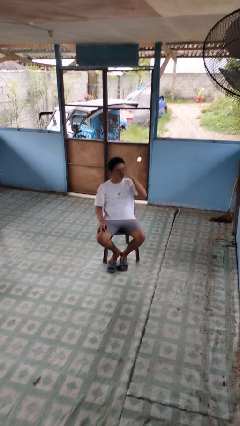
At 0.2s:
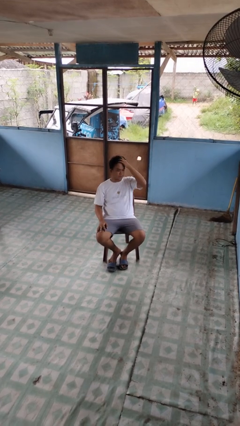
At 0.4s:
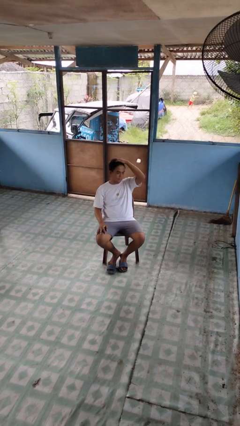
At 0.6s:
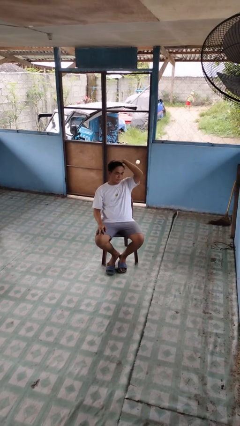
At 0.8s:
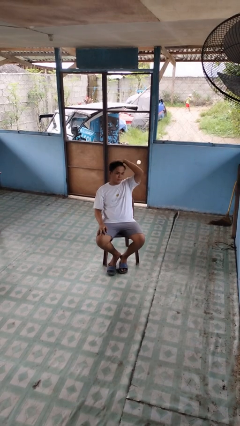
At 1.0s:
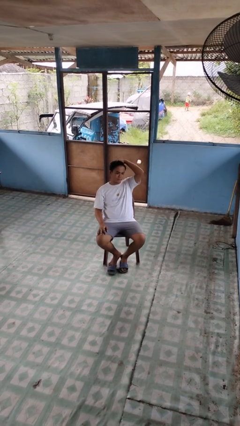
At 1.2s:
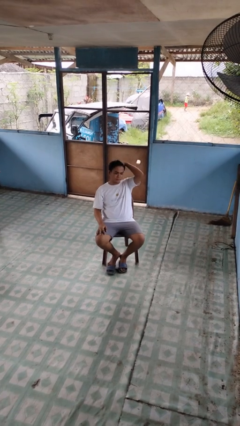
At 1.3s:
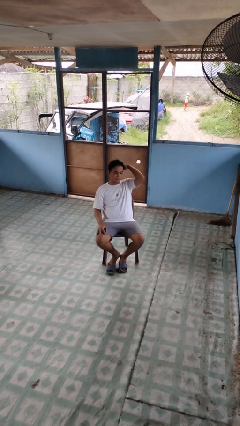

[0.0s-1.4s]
person strokes hair

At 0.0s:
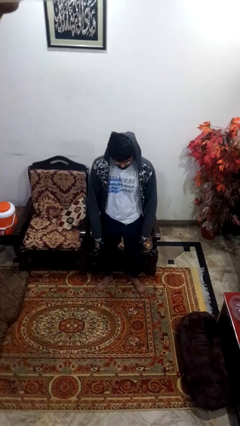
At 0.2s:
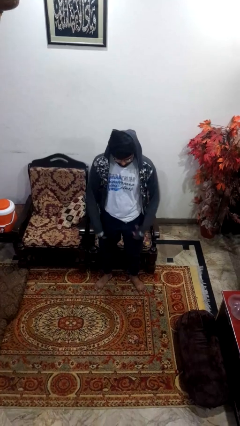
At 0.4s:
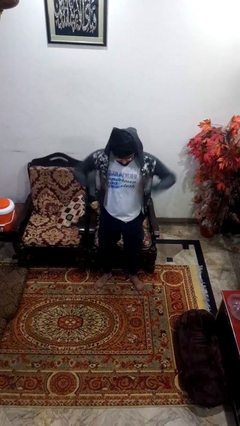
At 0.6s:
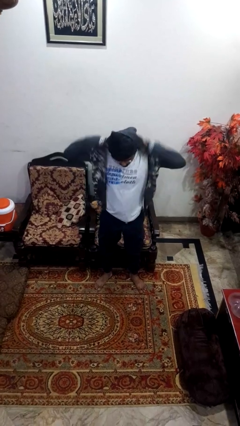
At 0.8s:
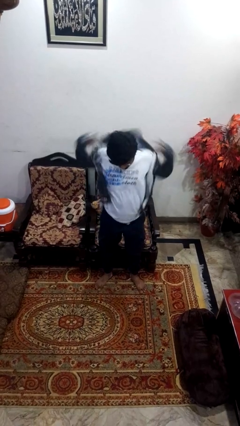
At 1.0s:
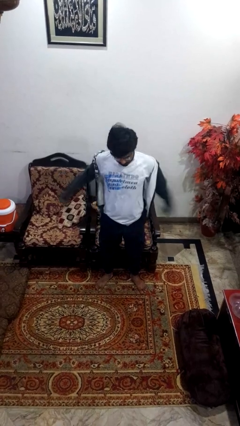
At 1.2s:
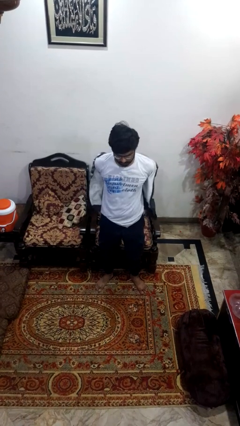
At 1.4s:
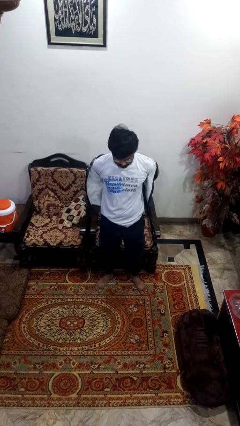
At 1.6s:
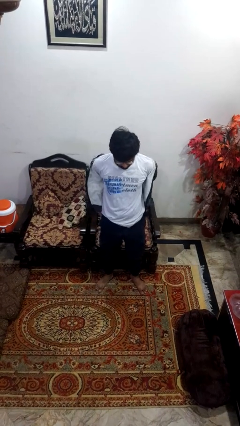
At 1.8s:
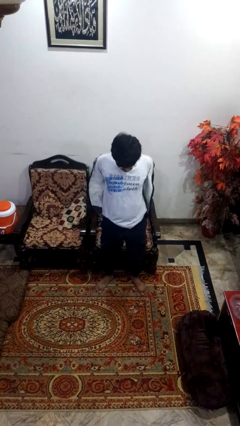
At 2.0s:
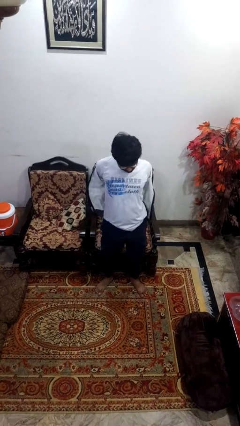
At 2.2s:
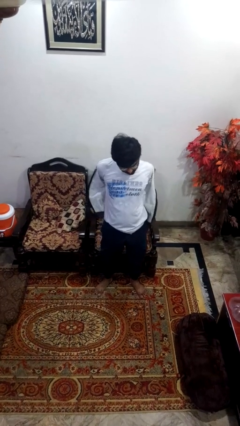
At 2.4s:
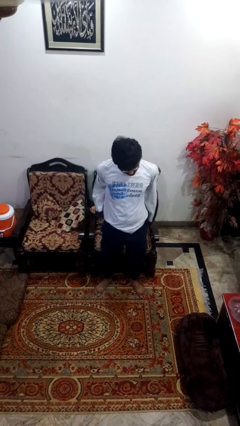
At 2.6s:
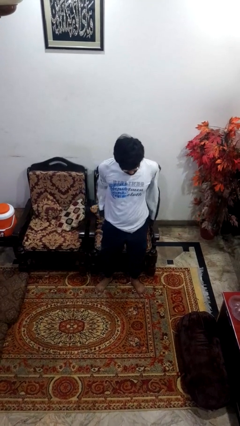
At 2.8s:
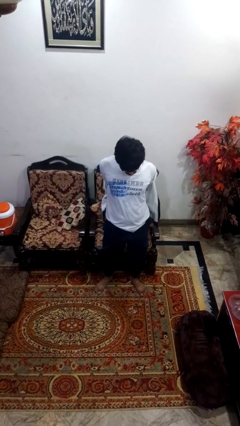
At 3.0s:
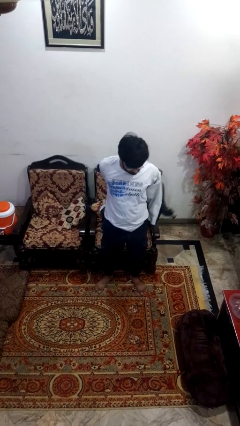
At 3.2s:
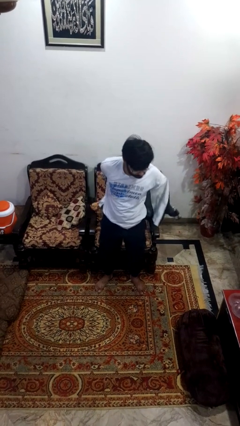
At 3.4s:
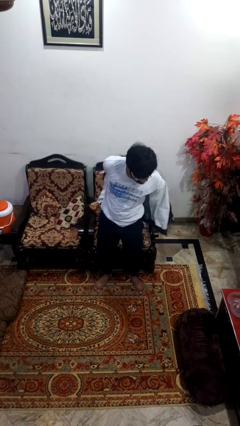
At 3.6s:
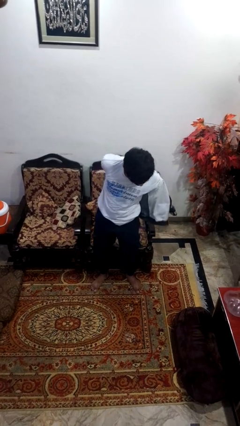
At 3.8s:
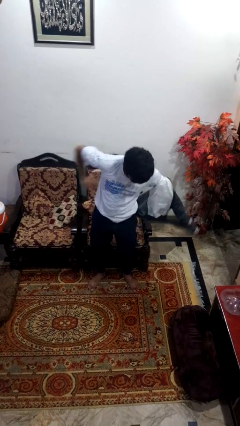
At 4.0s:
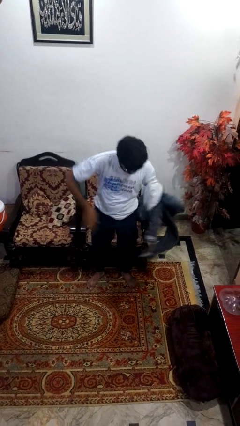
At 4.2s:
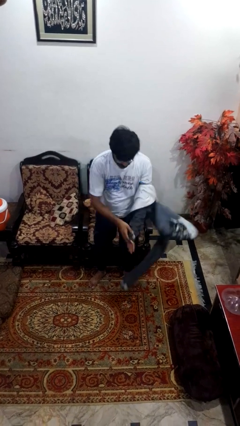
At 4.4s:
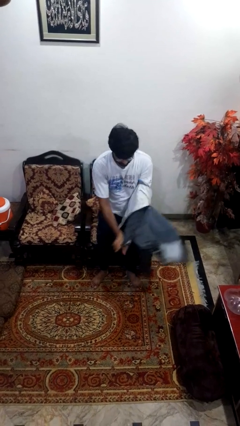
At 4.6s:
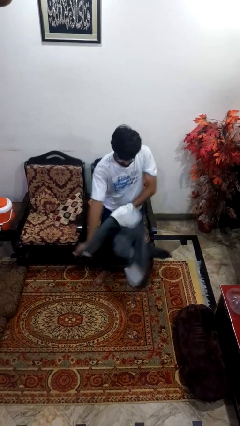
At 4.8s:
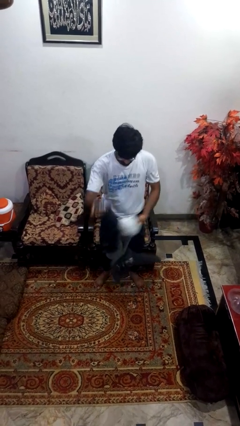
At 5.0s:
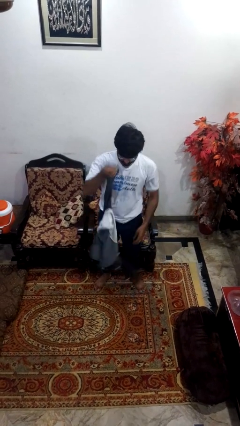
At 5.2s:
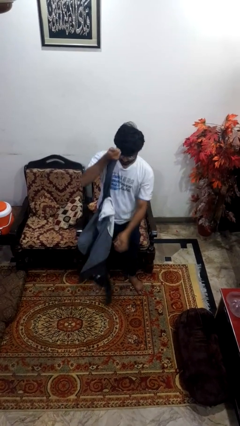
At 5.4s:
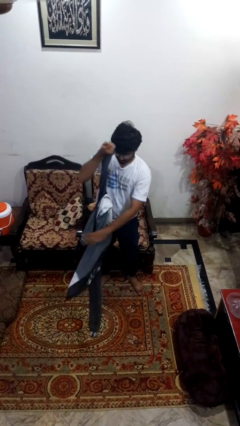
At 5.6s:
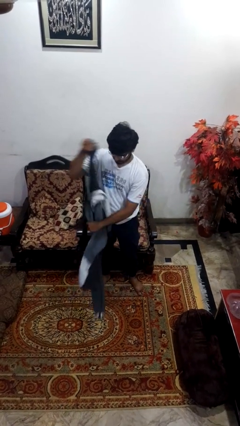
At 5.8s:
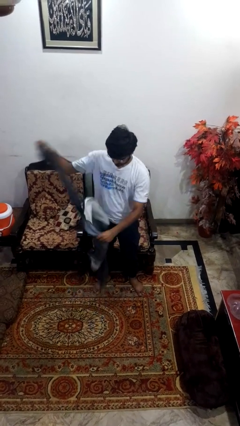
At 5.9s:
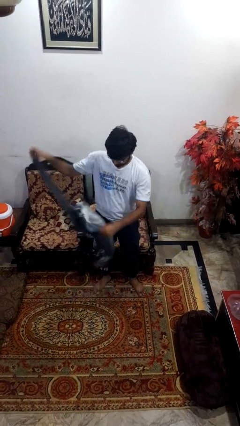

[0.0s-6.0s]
person takes off hoodie

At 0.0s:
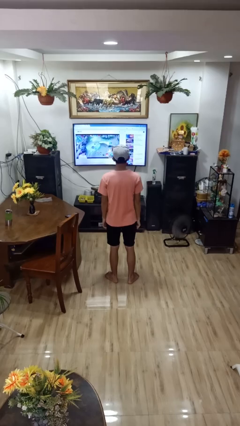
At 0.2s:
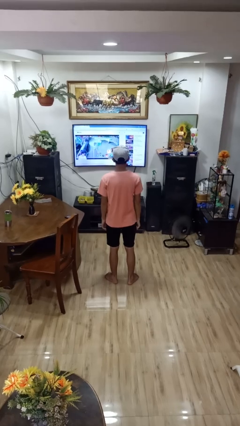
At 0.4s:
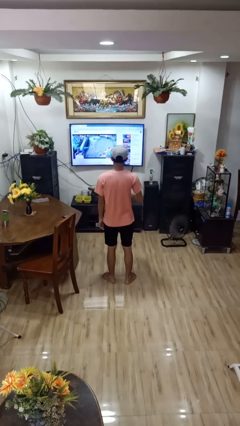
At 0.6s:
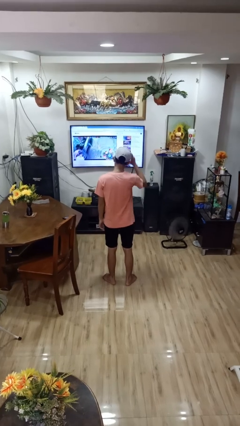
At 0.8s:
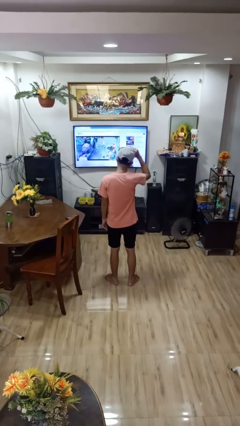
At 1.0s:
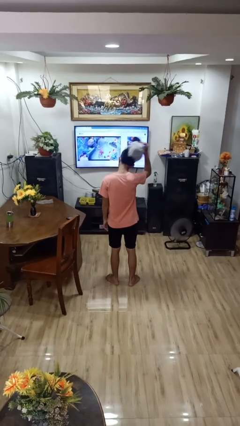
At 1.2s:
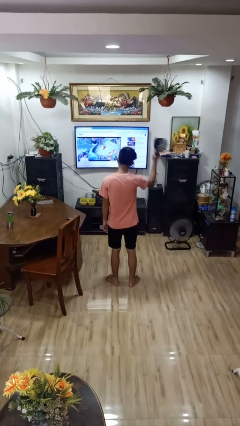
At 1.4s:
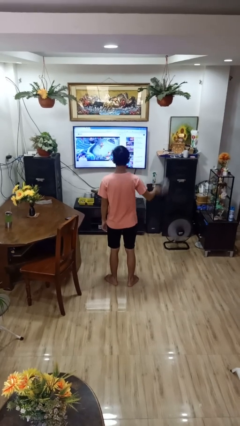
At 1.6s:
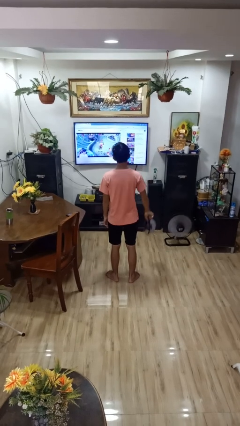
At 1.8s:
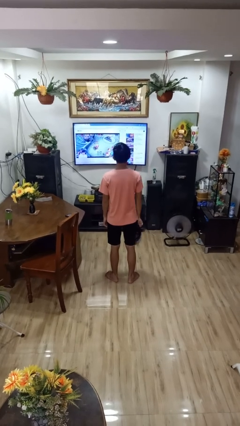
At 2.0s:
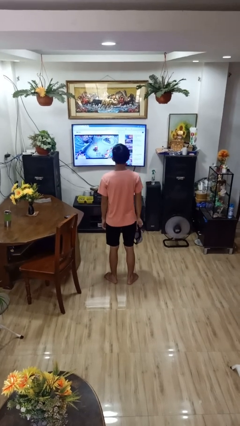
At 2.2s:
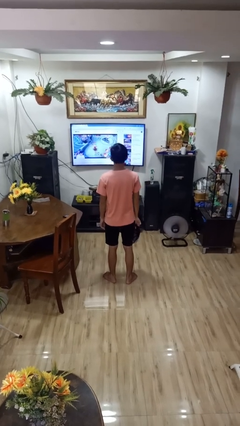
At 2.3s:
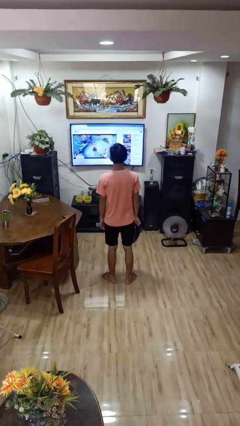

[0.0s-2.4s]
person takes off hat

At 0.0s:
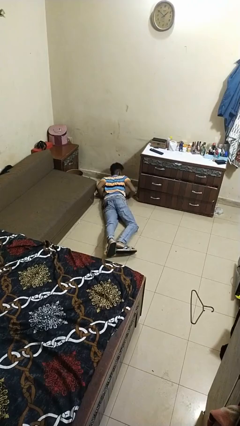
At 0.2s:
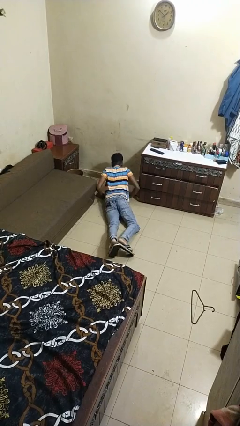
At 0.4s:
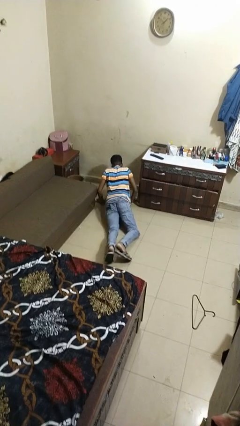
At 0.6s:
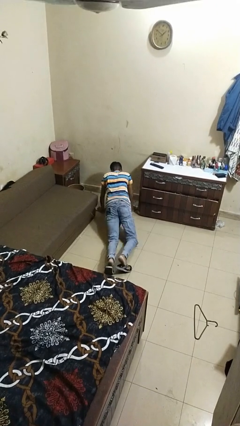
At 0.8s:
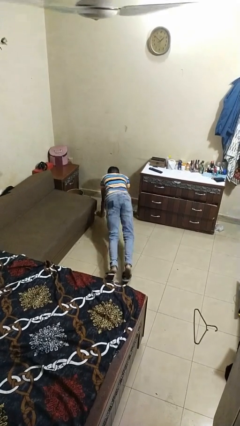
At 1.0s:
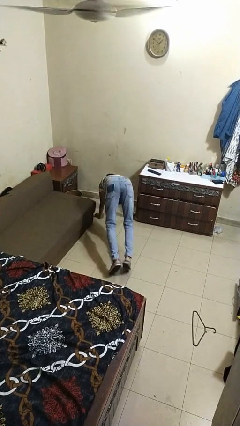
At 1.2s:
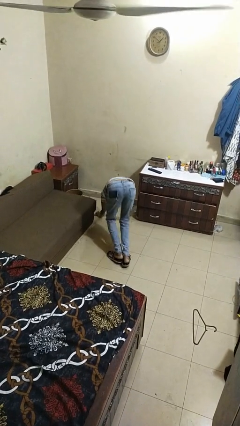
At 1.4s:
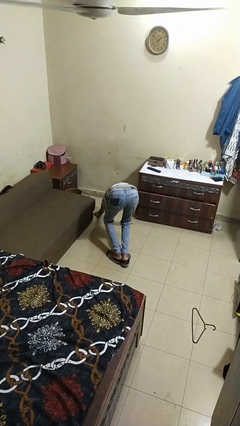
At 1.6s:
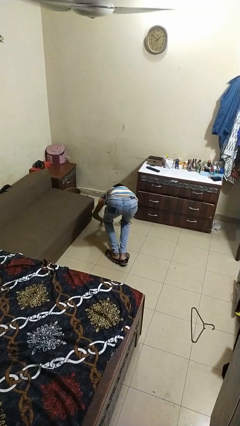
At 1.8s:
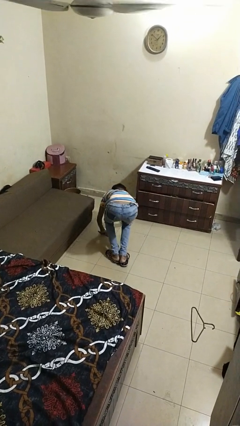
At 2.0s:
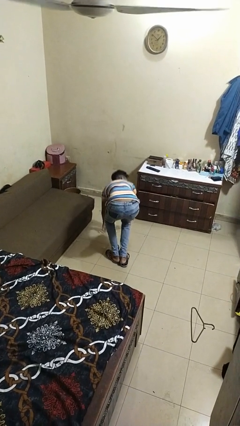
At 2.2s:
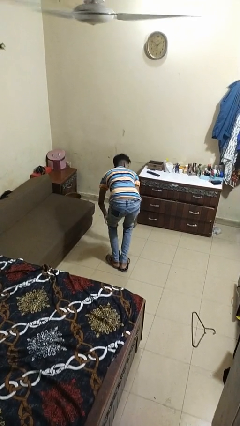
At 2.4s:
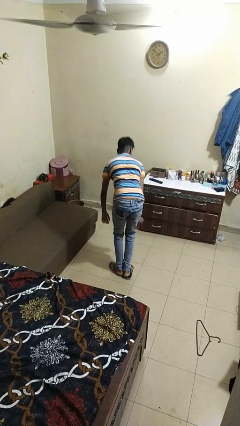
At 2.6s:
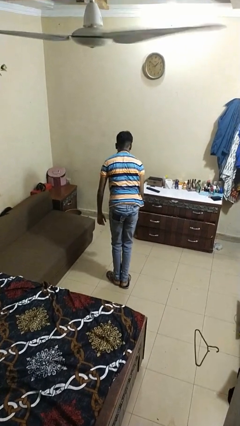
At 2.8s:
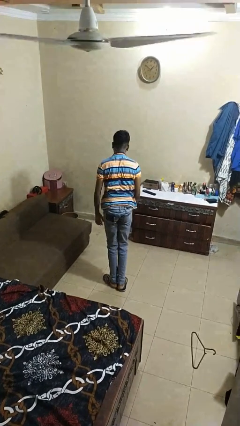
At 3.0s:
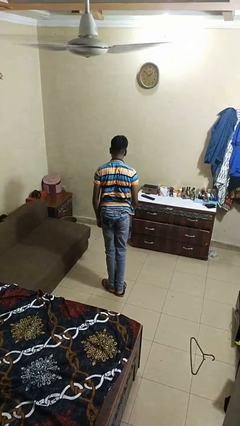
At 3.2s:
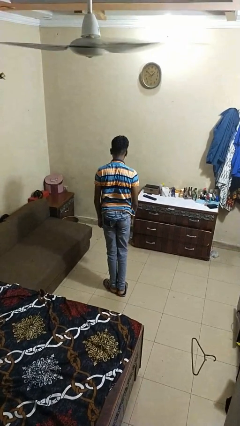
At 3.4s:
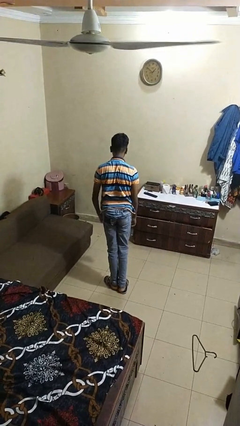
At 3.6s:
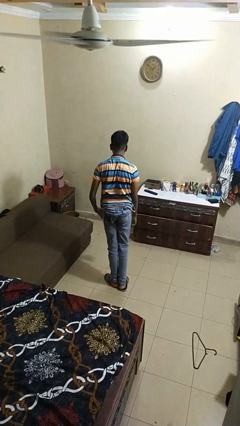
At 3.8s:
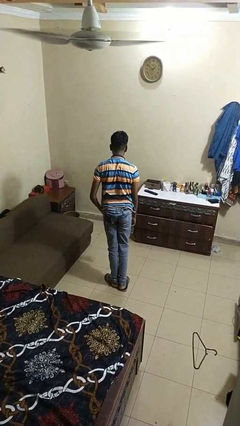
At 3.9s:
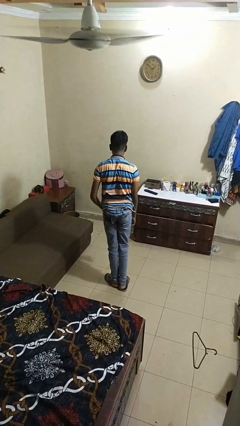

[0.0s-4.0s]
person stands up from floor

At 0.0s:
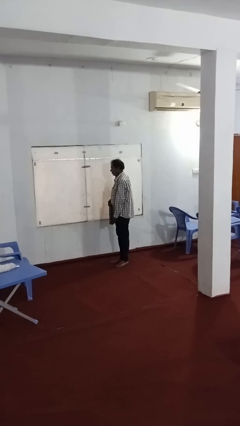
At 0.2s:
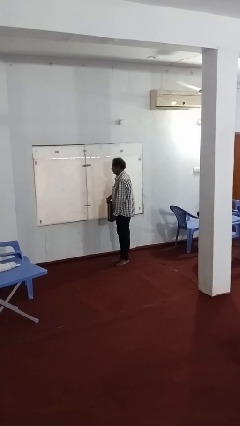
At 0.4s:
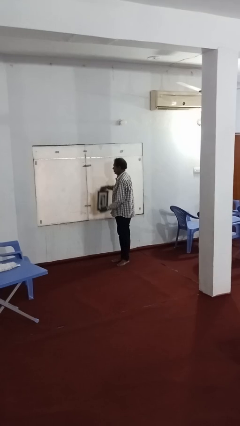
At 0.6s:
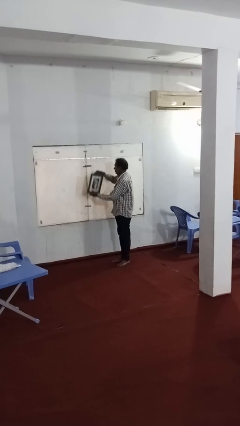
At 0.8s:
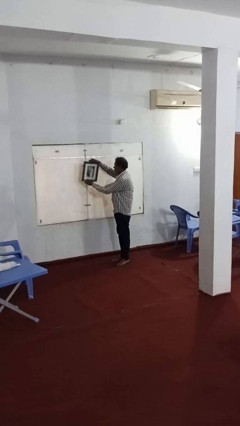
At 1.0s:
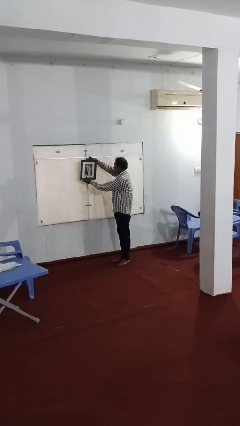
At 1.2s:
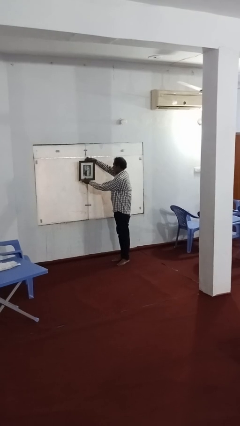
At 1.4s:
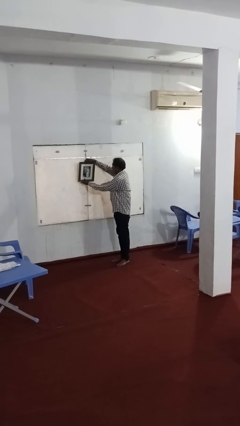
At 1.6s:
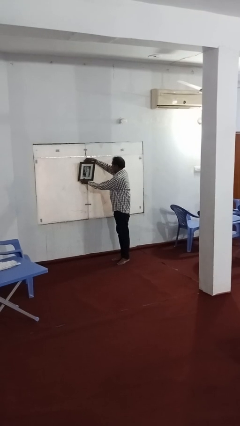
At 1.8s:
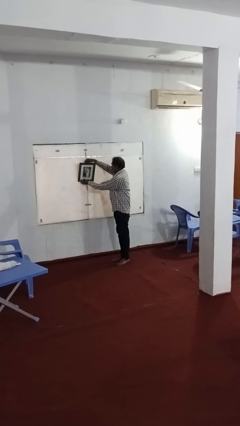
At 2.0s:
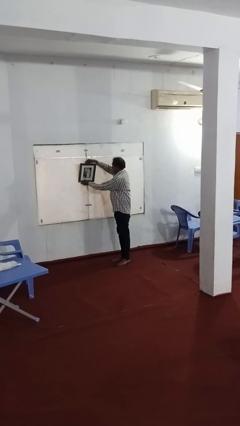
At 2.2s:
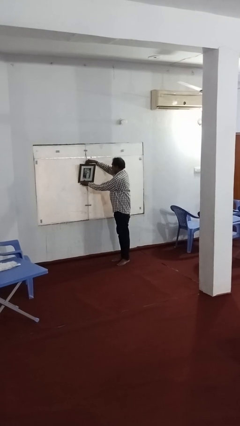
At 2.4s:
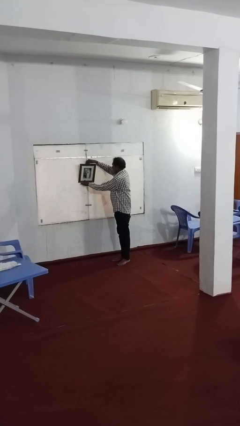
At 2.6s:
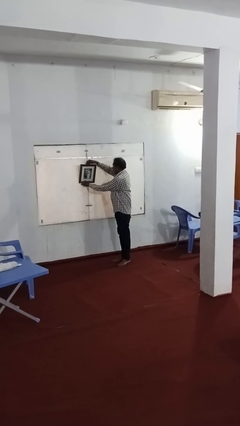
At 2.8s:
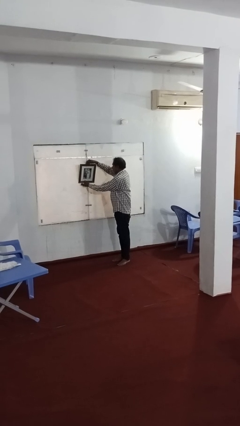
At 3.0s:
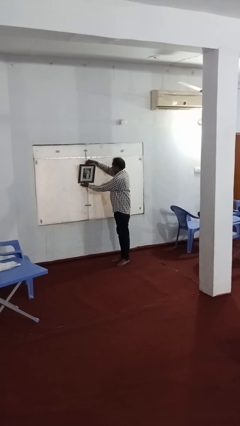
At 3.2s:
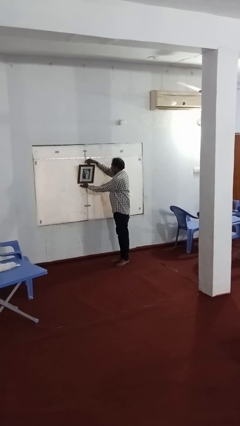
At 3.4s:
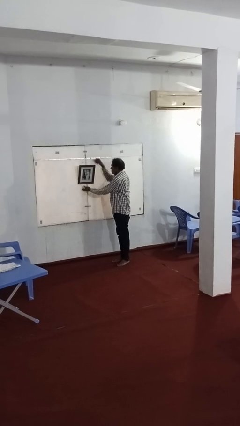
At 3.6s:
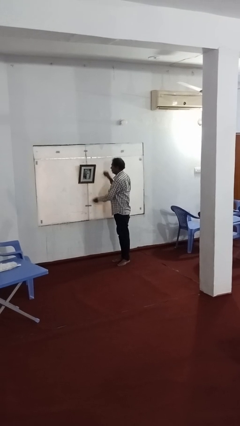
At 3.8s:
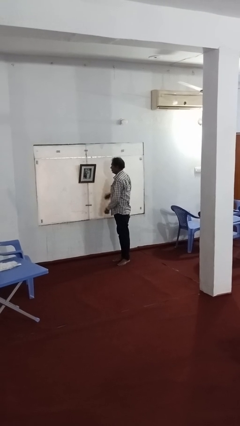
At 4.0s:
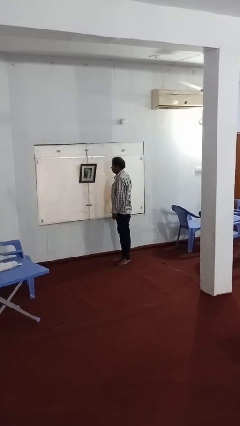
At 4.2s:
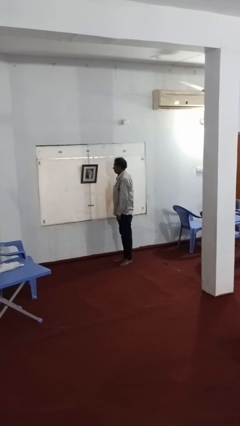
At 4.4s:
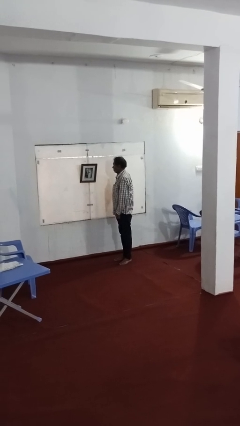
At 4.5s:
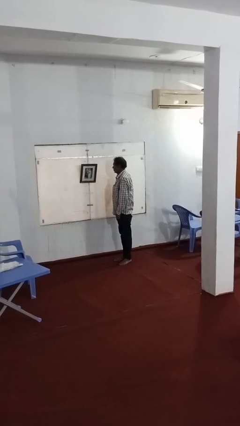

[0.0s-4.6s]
person puts up picture frame
